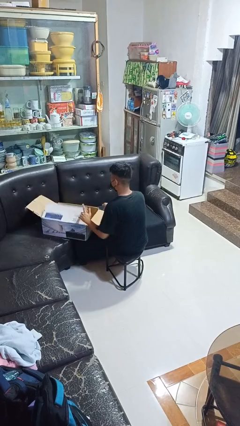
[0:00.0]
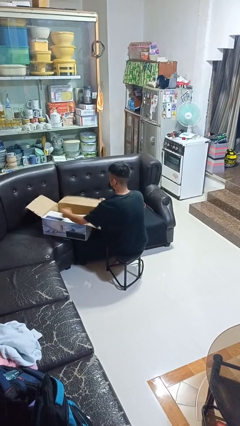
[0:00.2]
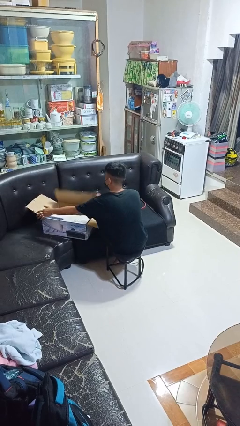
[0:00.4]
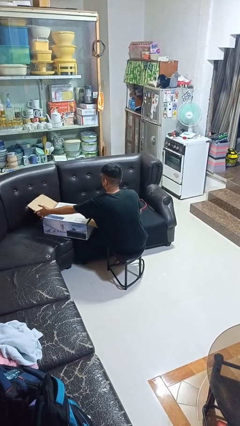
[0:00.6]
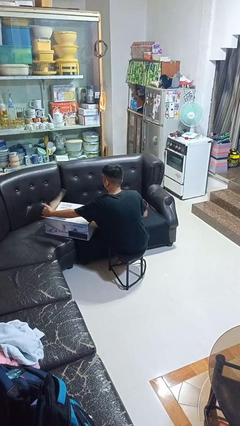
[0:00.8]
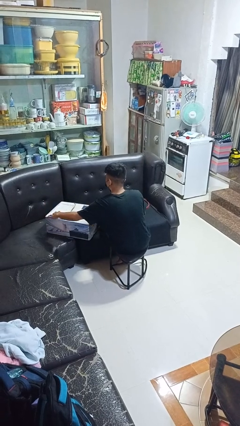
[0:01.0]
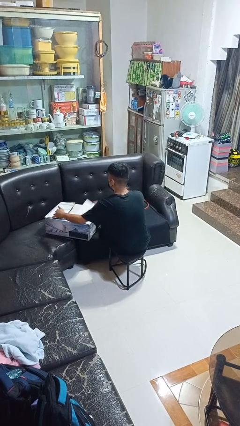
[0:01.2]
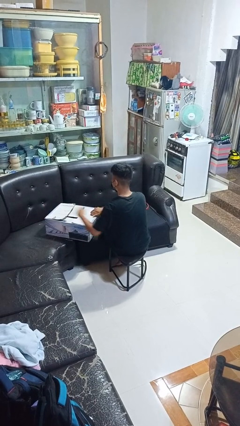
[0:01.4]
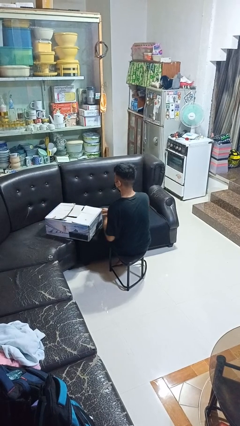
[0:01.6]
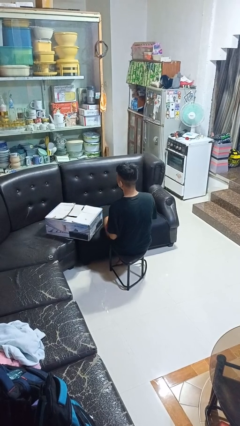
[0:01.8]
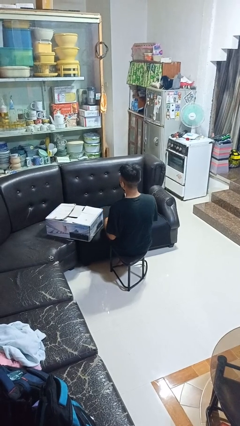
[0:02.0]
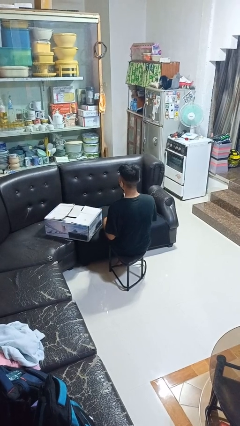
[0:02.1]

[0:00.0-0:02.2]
person closes box

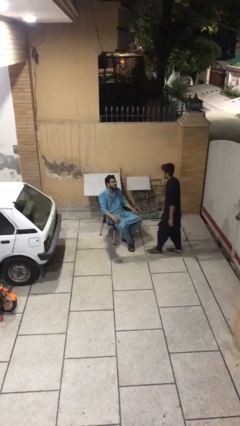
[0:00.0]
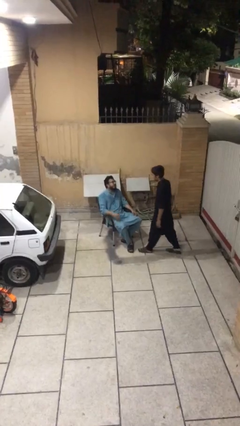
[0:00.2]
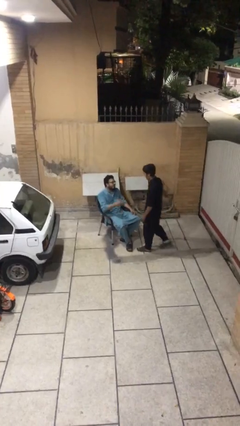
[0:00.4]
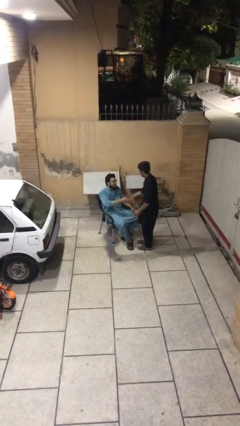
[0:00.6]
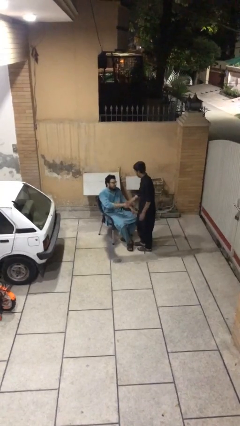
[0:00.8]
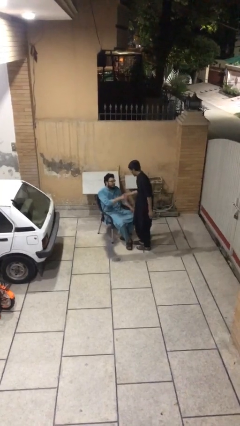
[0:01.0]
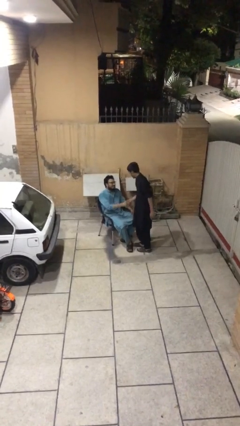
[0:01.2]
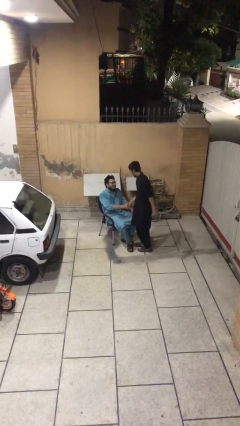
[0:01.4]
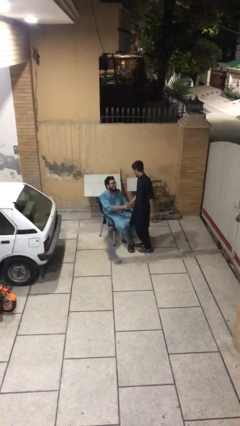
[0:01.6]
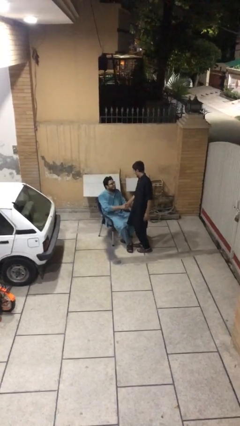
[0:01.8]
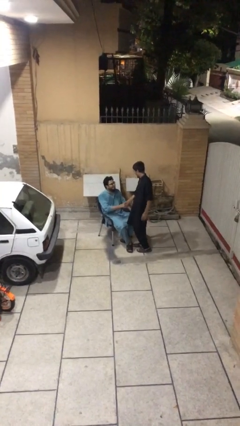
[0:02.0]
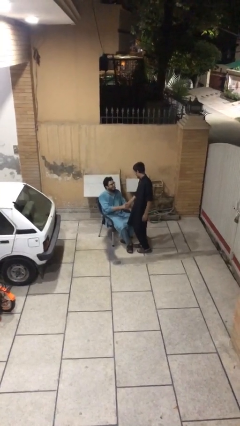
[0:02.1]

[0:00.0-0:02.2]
person shakes hand

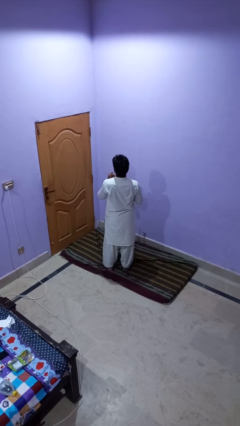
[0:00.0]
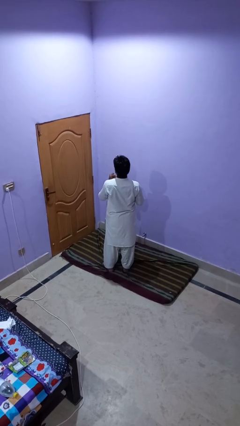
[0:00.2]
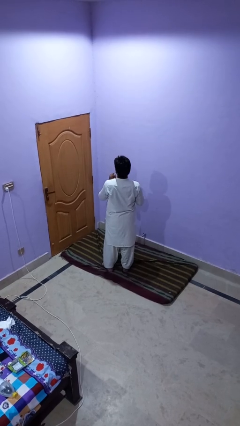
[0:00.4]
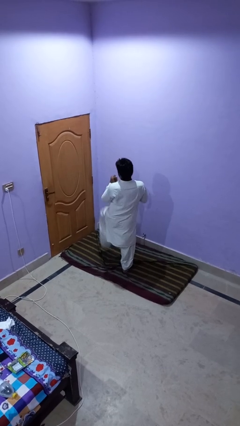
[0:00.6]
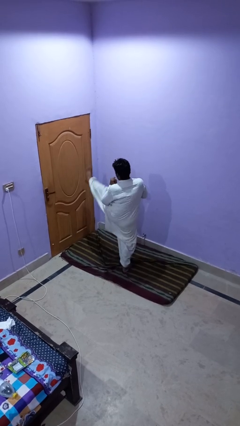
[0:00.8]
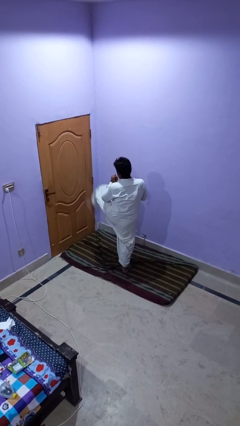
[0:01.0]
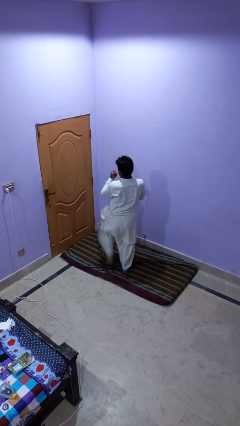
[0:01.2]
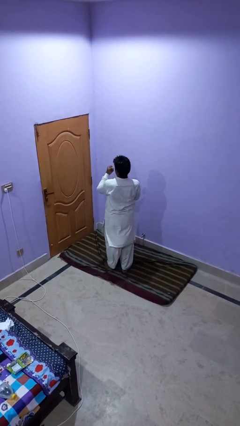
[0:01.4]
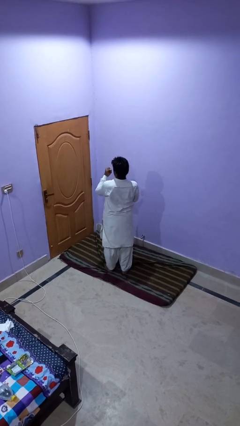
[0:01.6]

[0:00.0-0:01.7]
person karate kicks

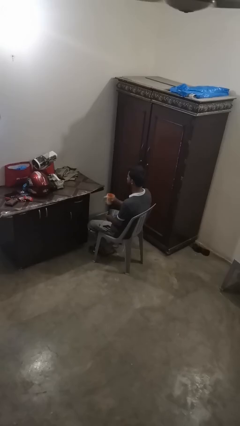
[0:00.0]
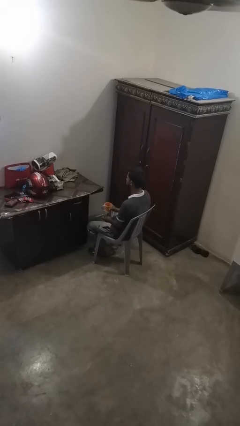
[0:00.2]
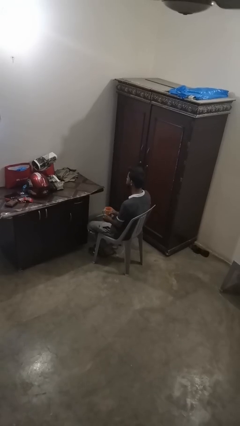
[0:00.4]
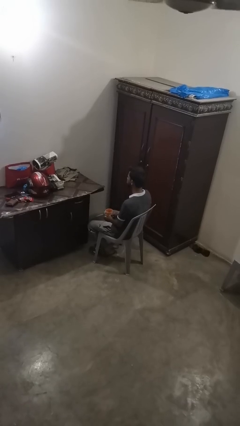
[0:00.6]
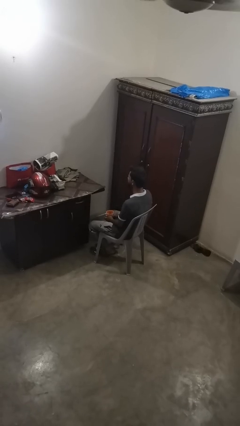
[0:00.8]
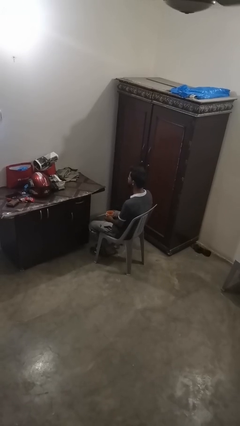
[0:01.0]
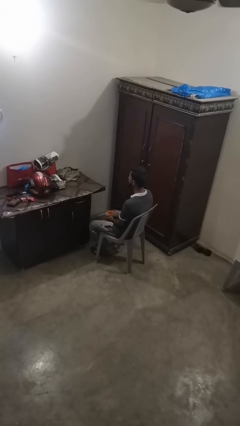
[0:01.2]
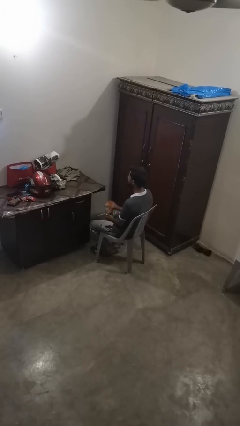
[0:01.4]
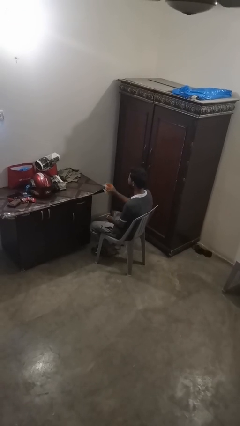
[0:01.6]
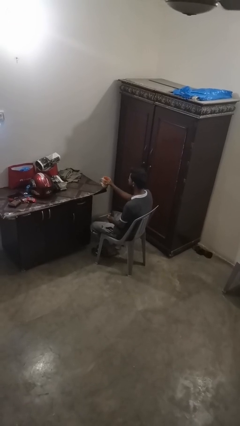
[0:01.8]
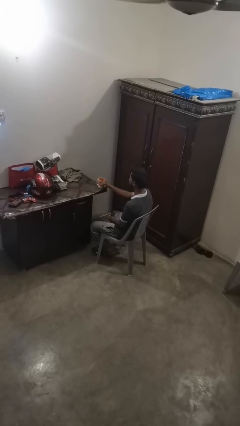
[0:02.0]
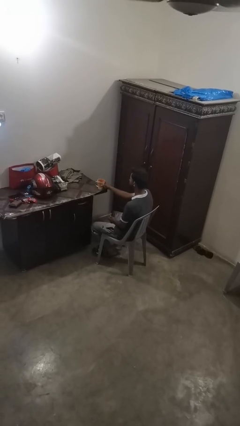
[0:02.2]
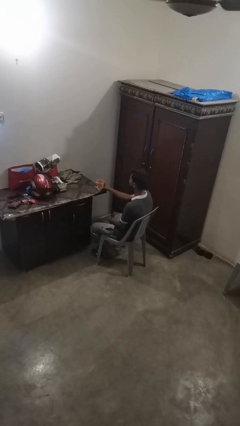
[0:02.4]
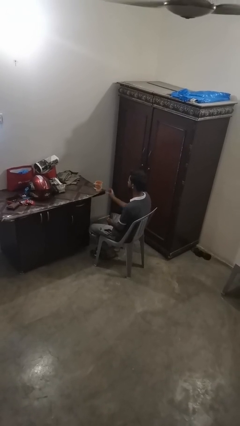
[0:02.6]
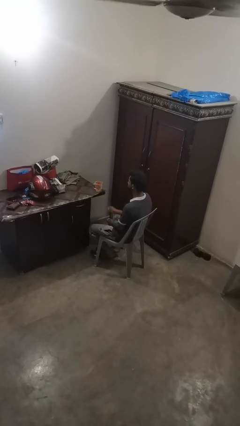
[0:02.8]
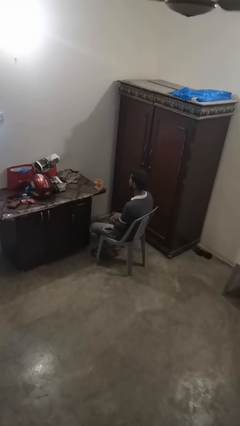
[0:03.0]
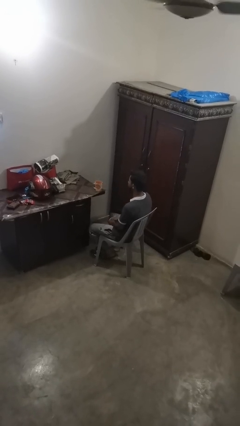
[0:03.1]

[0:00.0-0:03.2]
person puts down object on table

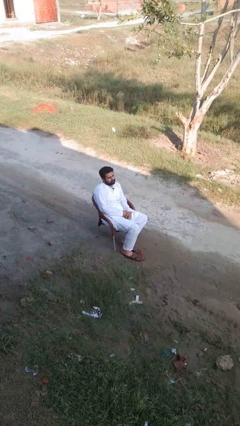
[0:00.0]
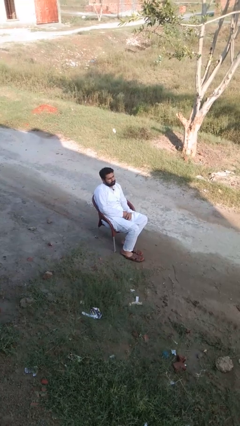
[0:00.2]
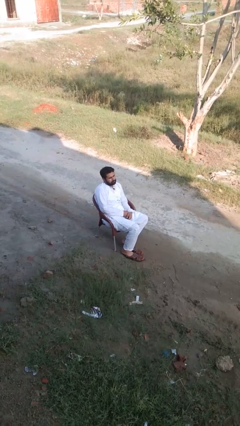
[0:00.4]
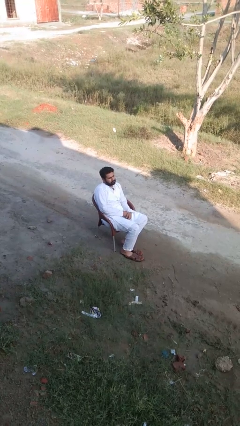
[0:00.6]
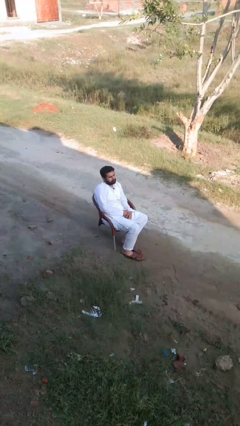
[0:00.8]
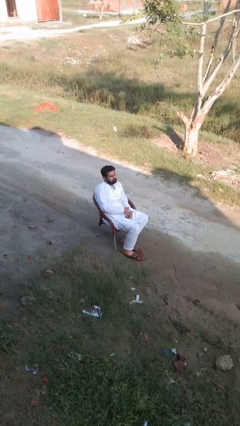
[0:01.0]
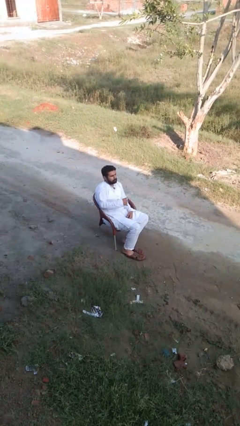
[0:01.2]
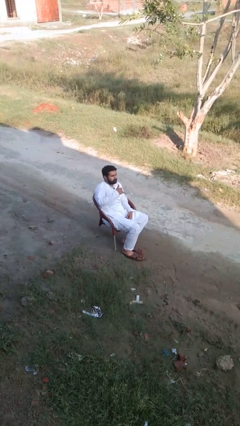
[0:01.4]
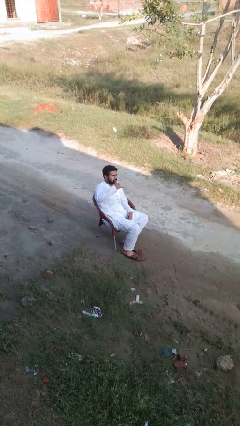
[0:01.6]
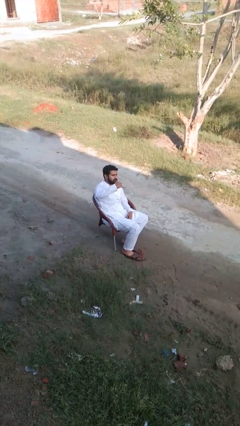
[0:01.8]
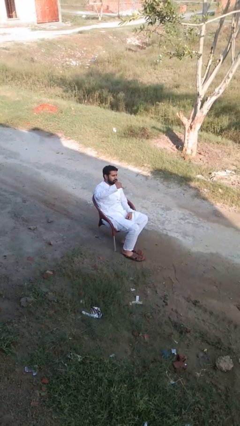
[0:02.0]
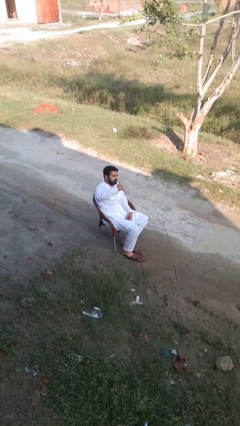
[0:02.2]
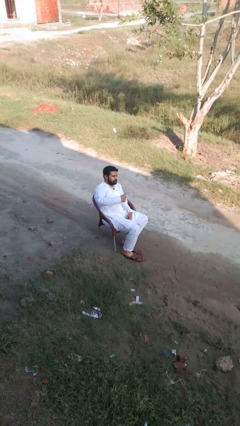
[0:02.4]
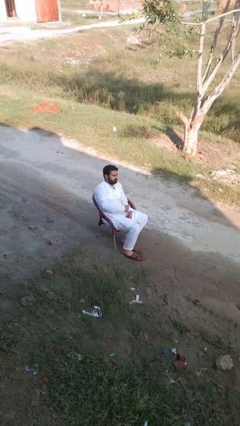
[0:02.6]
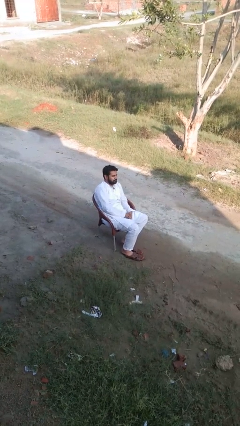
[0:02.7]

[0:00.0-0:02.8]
person gestures call me

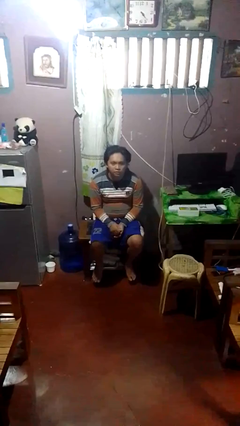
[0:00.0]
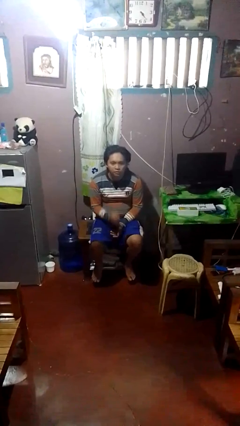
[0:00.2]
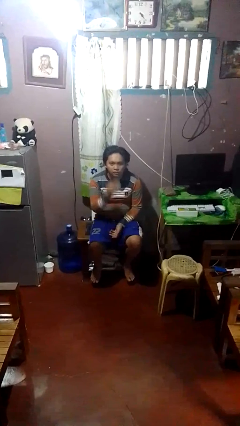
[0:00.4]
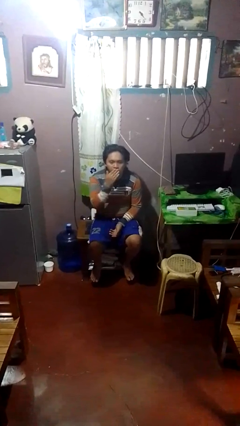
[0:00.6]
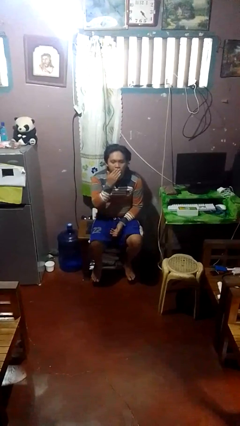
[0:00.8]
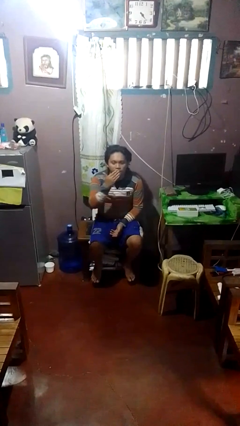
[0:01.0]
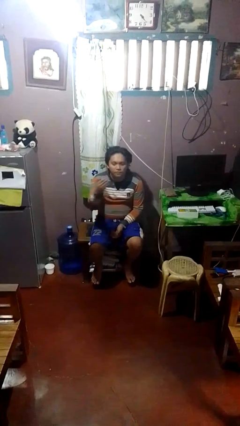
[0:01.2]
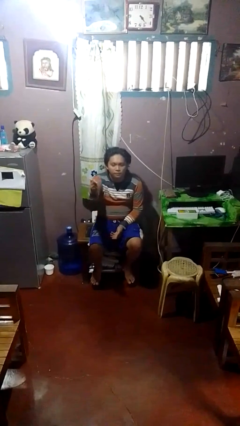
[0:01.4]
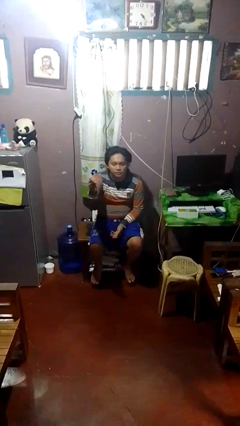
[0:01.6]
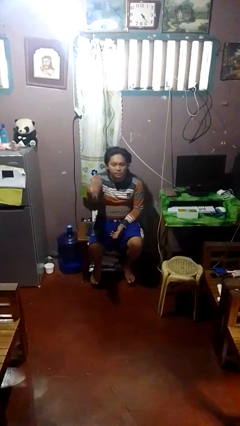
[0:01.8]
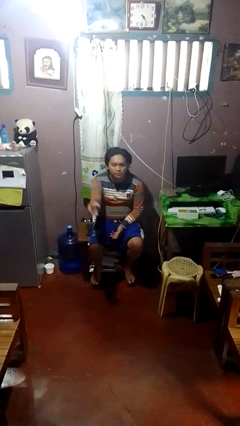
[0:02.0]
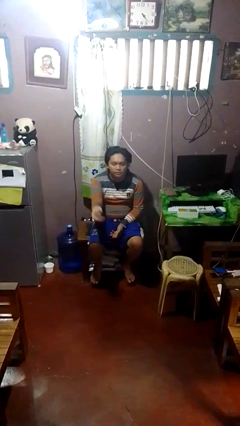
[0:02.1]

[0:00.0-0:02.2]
person gestures blow kiss

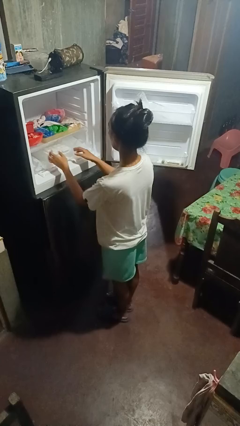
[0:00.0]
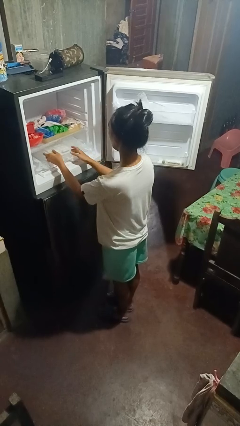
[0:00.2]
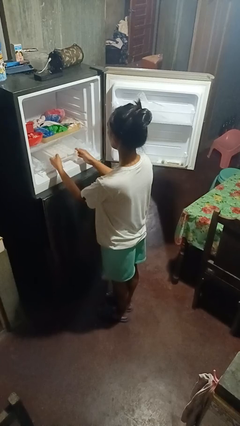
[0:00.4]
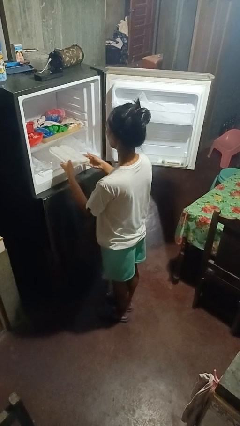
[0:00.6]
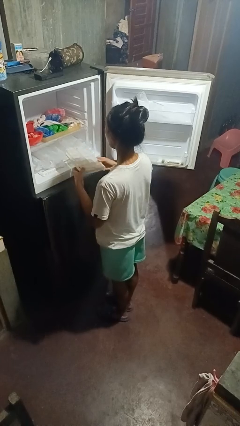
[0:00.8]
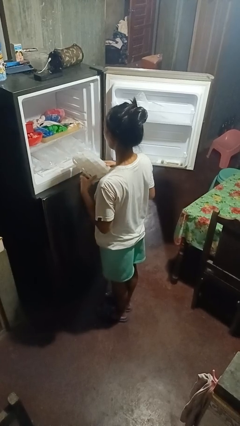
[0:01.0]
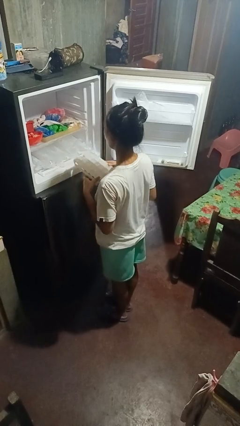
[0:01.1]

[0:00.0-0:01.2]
person takes object from refrigerator

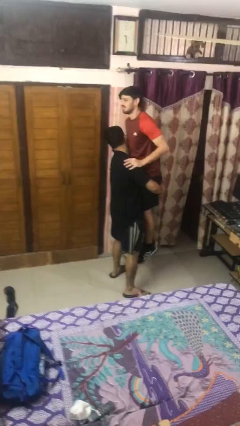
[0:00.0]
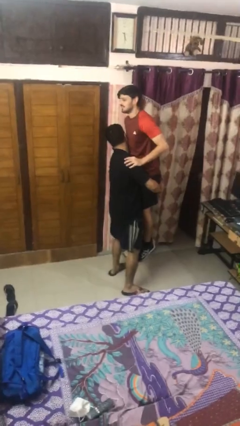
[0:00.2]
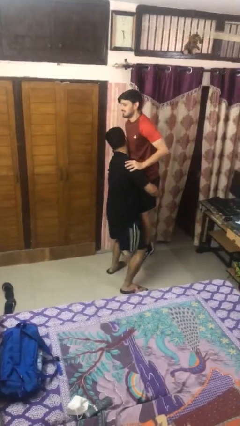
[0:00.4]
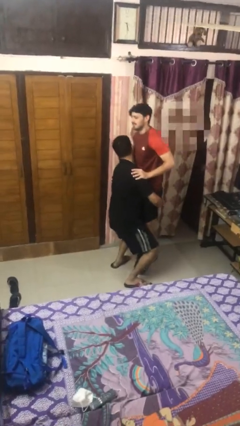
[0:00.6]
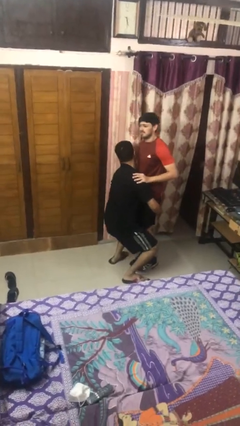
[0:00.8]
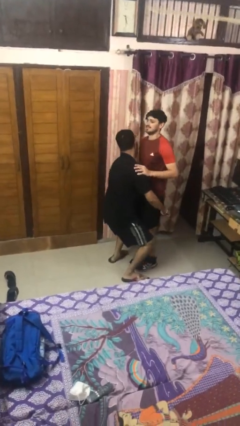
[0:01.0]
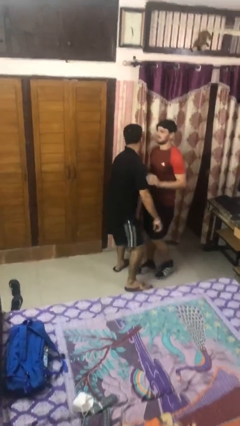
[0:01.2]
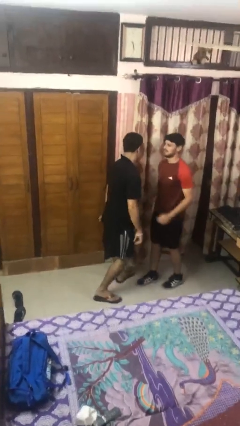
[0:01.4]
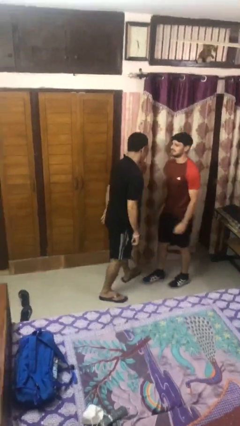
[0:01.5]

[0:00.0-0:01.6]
person puts down person

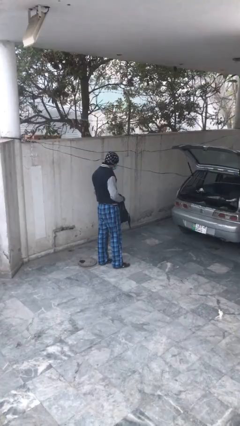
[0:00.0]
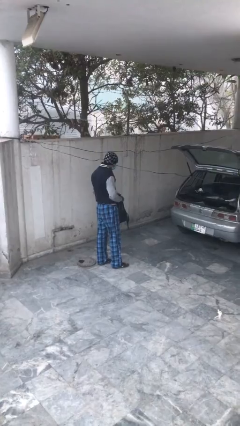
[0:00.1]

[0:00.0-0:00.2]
person loads car
